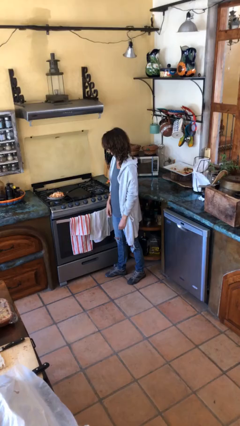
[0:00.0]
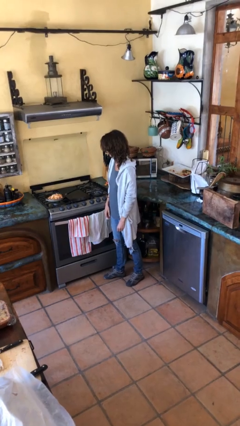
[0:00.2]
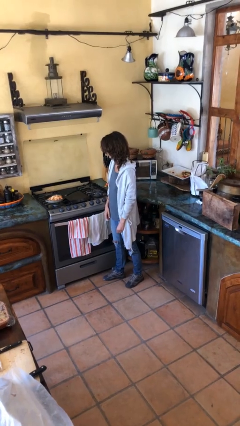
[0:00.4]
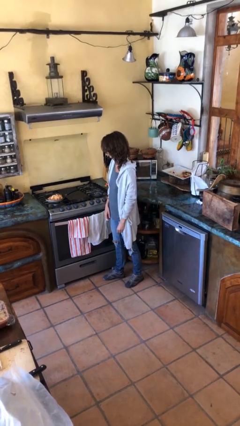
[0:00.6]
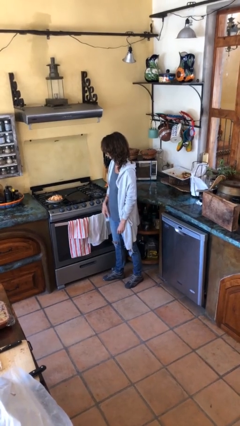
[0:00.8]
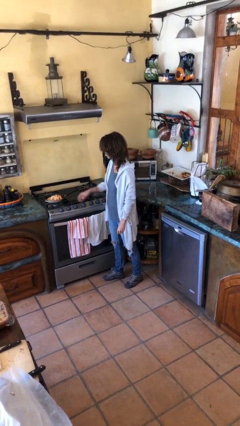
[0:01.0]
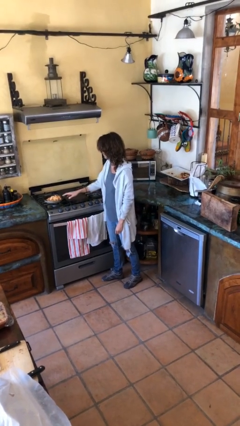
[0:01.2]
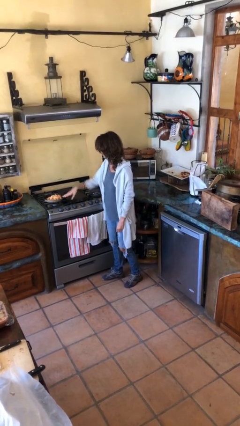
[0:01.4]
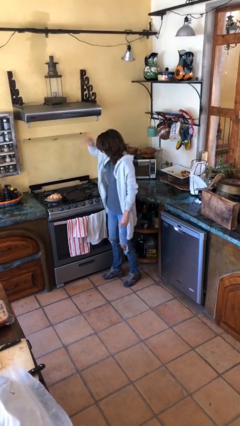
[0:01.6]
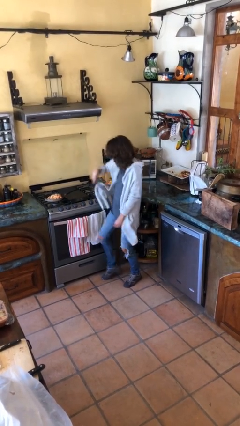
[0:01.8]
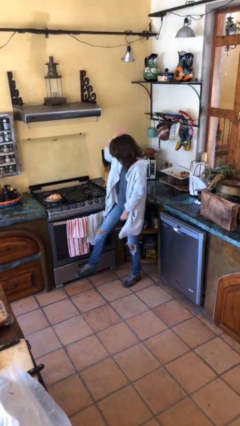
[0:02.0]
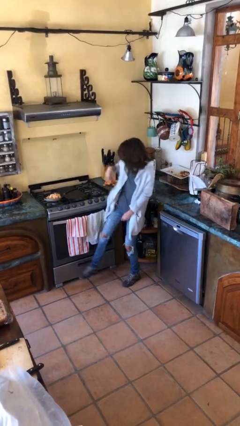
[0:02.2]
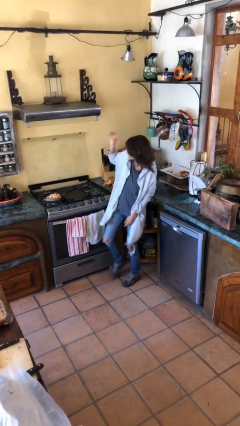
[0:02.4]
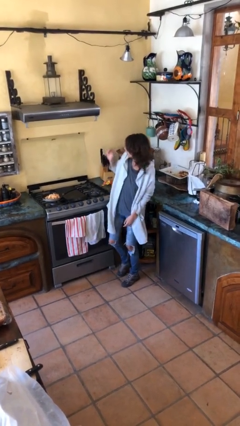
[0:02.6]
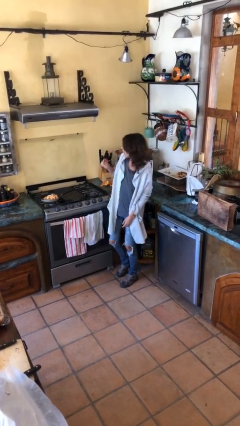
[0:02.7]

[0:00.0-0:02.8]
person burns hand

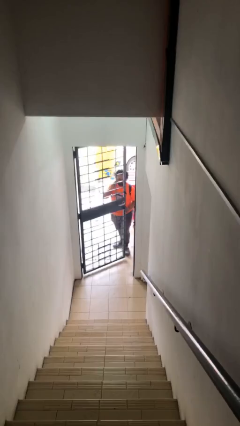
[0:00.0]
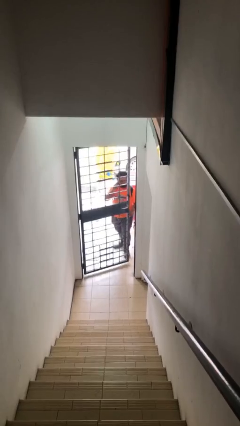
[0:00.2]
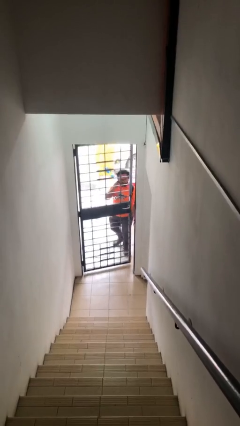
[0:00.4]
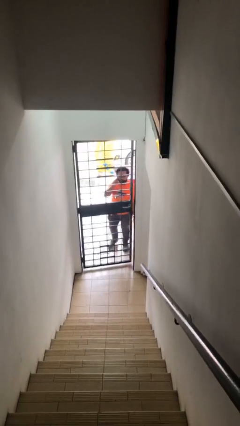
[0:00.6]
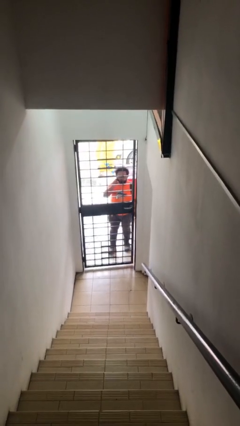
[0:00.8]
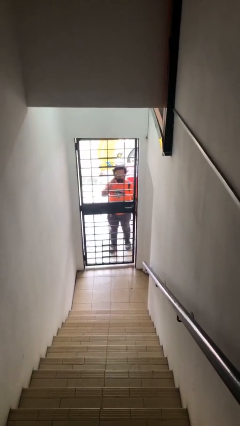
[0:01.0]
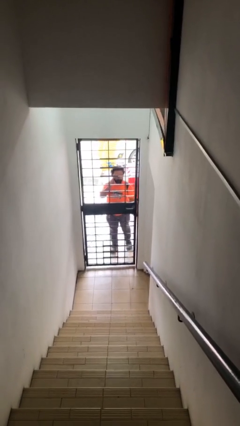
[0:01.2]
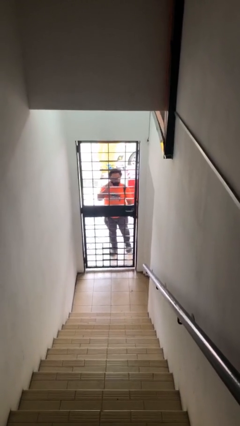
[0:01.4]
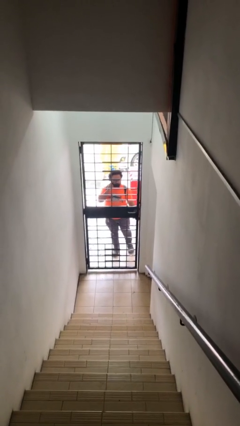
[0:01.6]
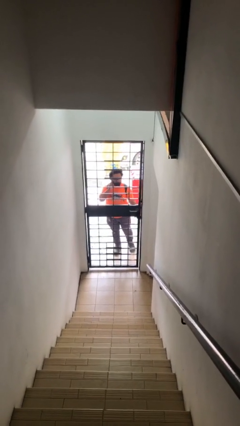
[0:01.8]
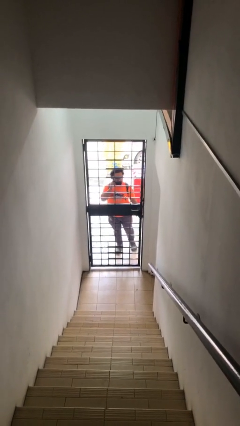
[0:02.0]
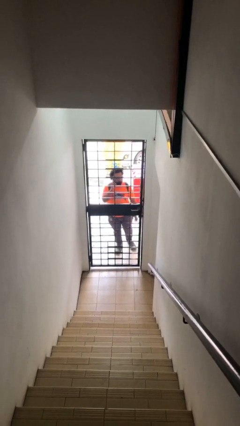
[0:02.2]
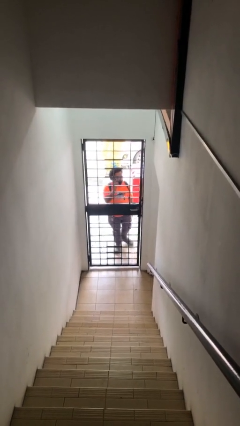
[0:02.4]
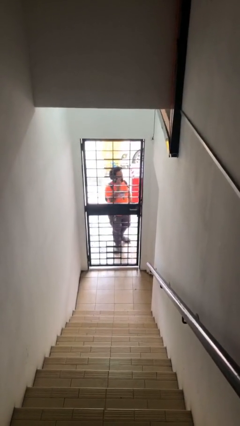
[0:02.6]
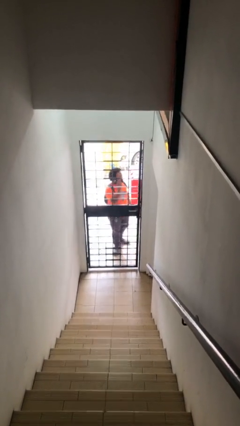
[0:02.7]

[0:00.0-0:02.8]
person closes facility door

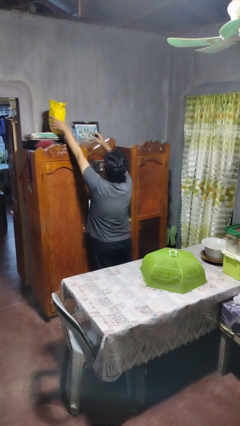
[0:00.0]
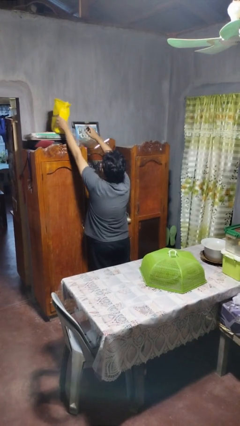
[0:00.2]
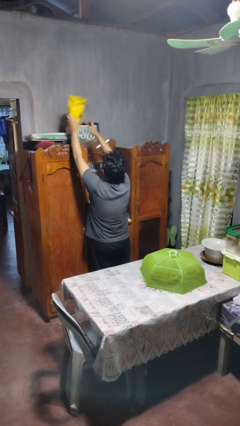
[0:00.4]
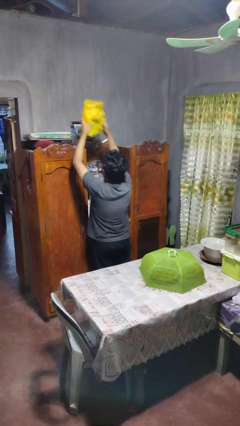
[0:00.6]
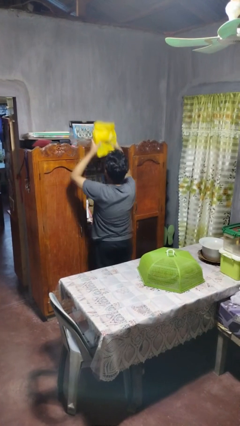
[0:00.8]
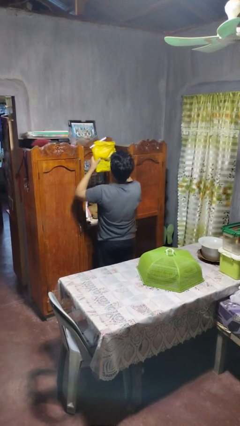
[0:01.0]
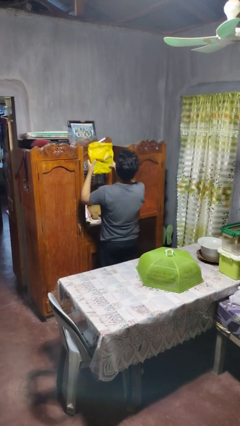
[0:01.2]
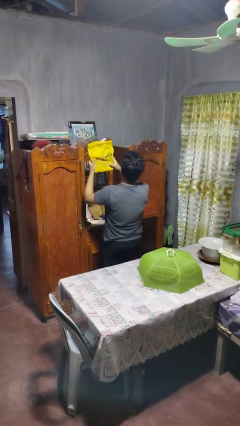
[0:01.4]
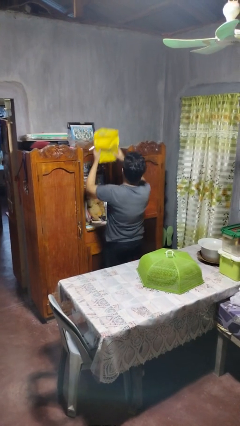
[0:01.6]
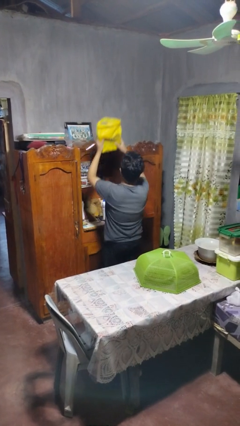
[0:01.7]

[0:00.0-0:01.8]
person picks up object from shelf

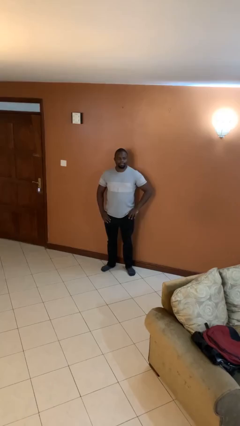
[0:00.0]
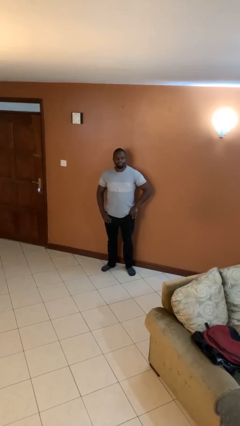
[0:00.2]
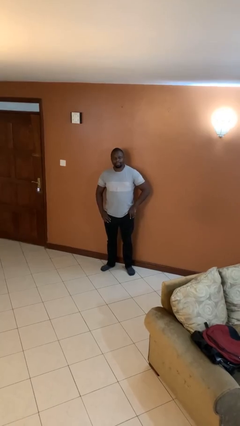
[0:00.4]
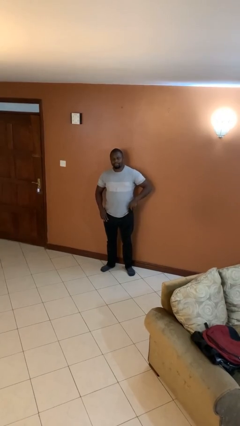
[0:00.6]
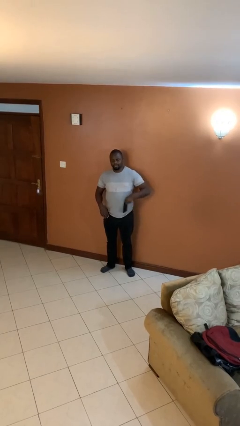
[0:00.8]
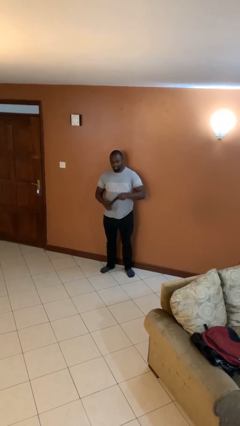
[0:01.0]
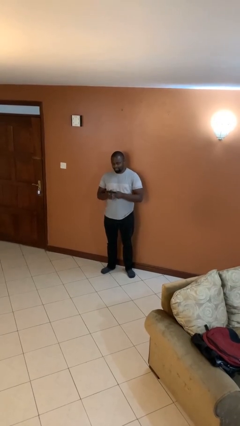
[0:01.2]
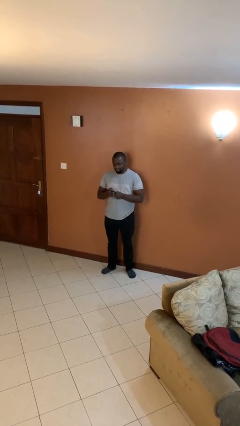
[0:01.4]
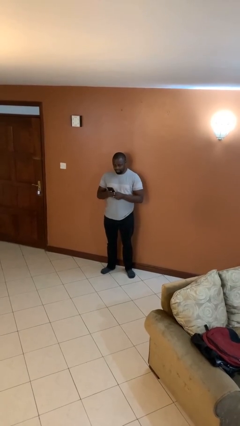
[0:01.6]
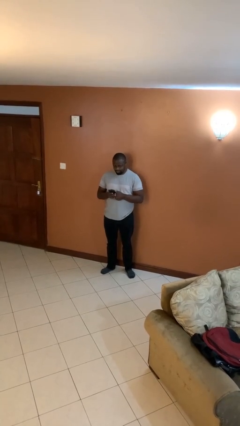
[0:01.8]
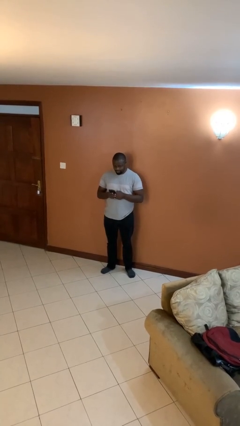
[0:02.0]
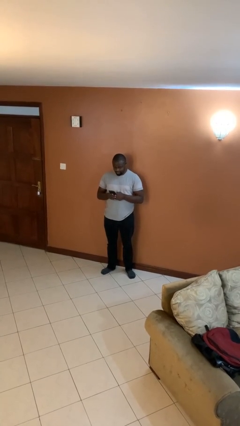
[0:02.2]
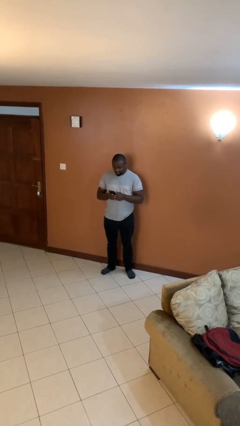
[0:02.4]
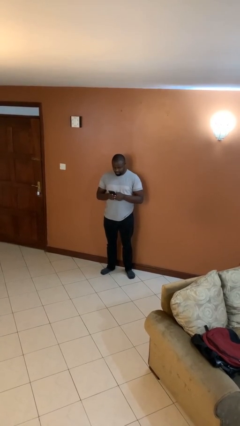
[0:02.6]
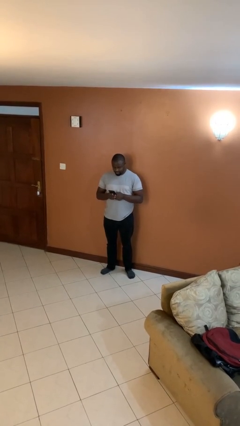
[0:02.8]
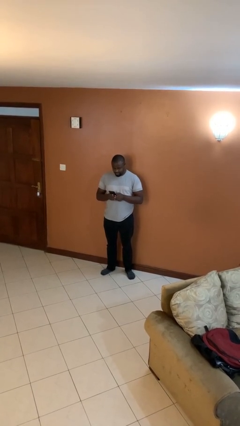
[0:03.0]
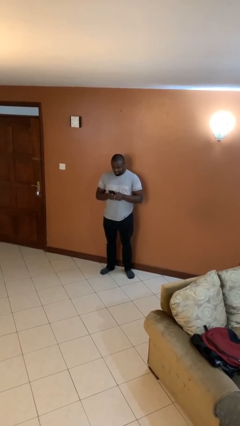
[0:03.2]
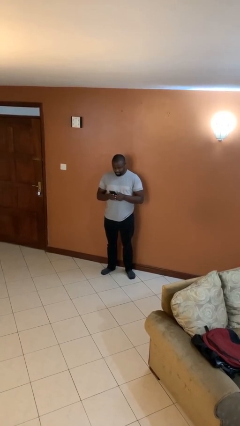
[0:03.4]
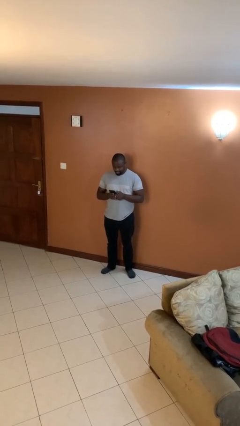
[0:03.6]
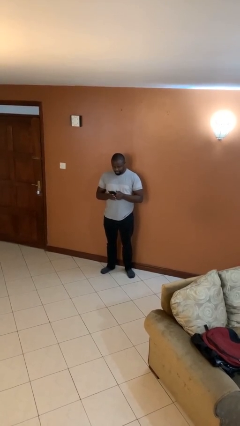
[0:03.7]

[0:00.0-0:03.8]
person takes phone from pocket

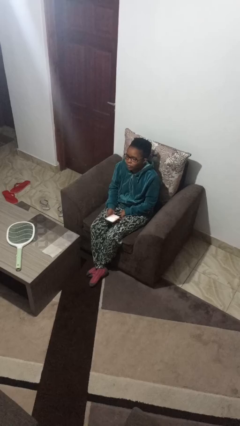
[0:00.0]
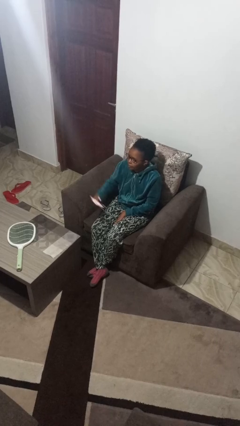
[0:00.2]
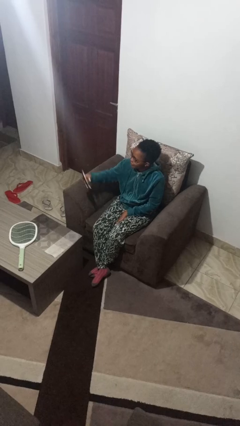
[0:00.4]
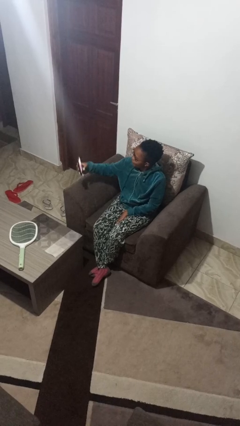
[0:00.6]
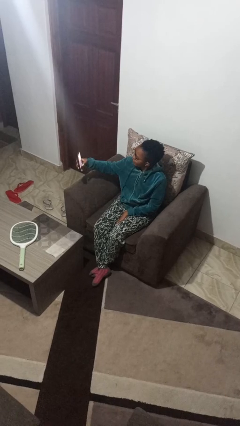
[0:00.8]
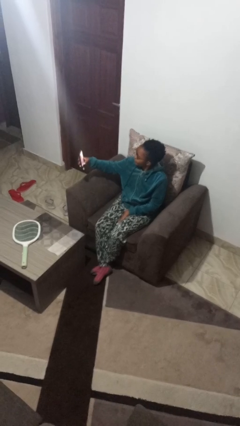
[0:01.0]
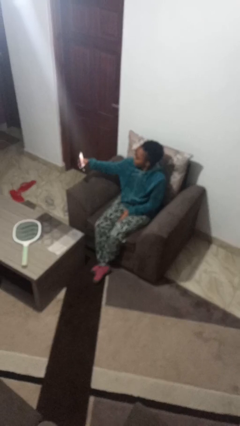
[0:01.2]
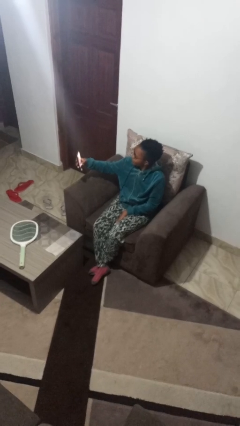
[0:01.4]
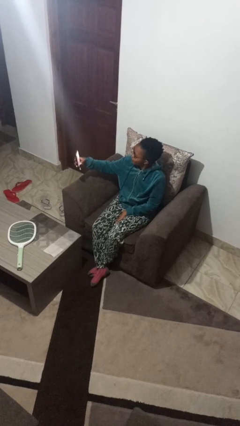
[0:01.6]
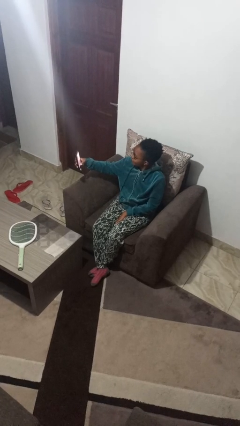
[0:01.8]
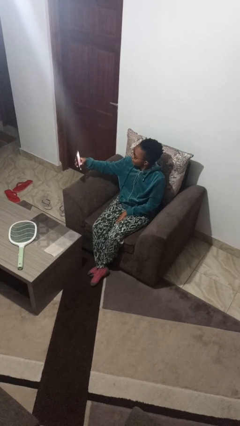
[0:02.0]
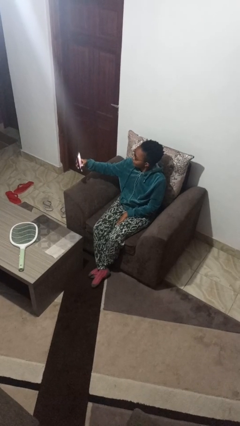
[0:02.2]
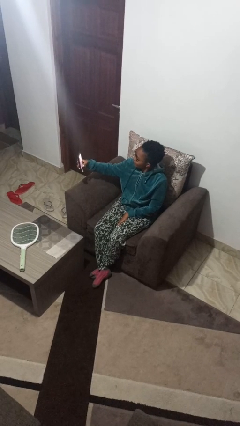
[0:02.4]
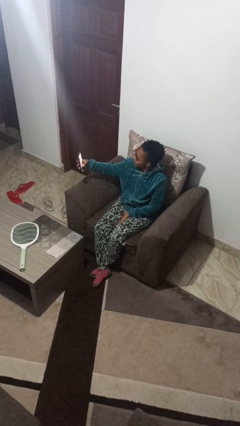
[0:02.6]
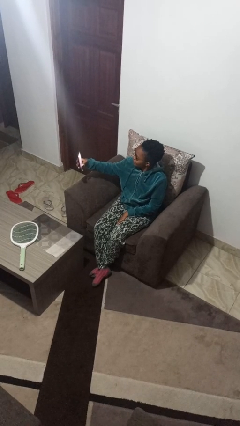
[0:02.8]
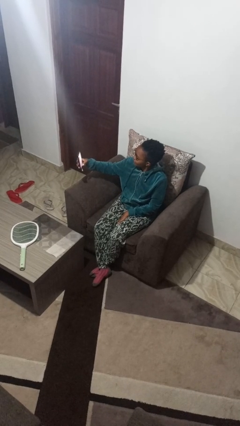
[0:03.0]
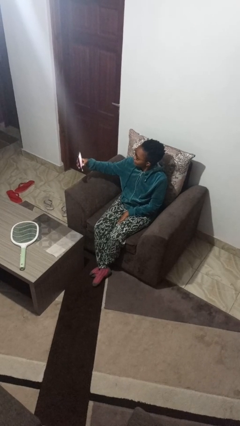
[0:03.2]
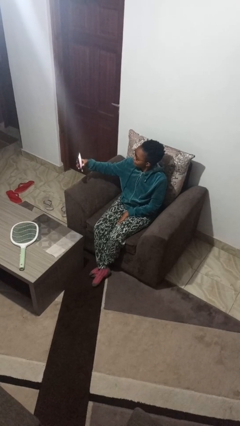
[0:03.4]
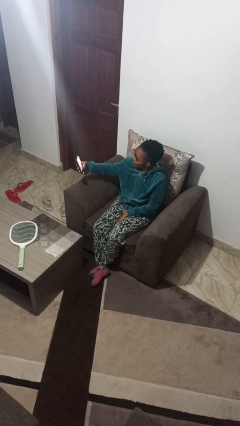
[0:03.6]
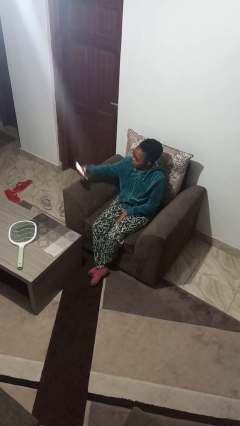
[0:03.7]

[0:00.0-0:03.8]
person takes selfie

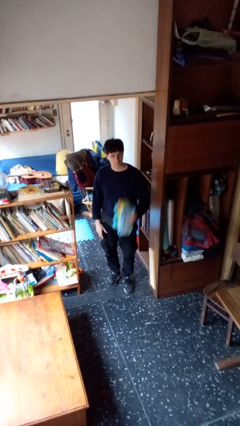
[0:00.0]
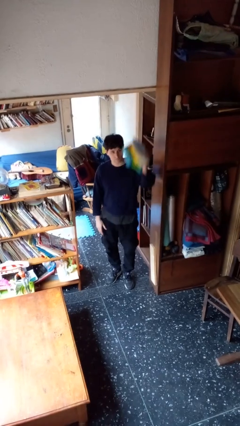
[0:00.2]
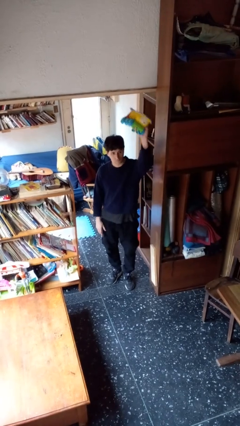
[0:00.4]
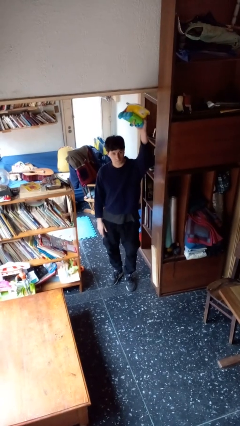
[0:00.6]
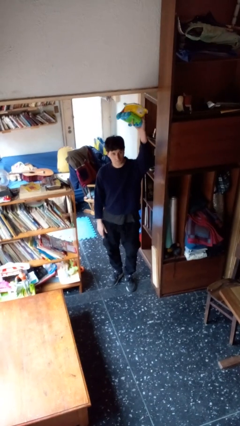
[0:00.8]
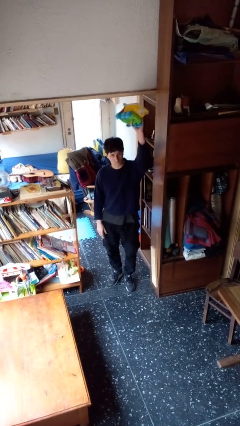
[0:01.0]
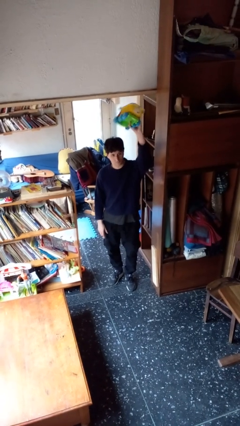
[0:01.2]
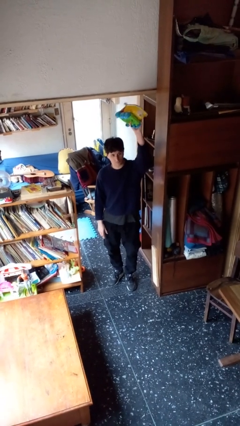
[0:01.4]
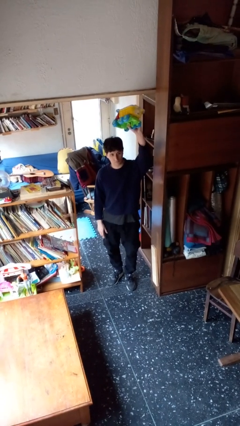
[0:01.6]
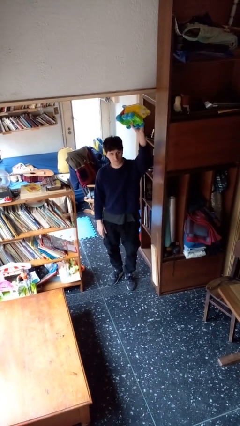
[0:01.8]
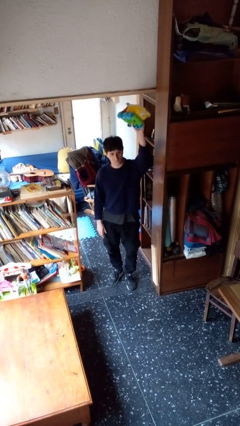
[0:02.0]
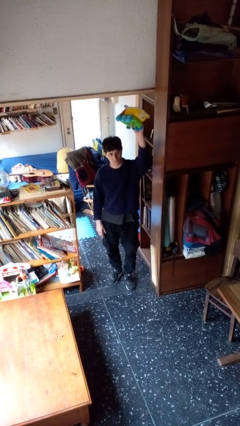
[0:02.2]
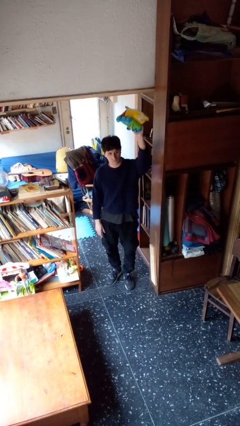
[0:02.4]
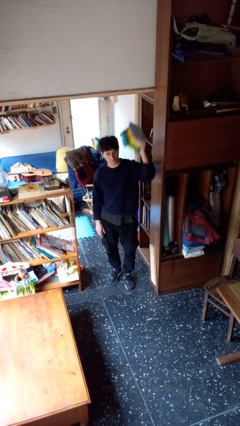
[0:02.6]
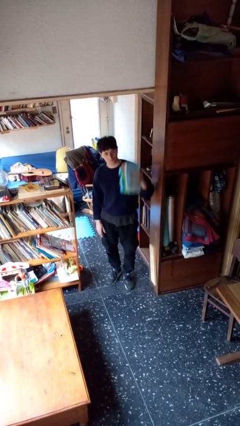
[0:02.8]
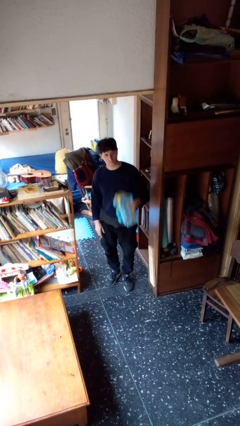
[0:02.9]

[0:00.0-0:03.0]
person holds object above head
